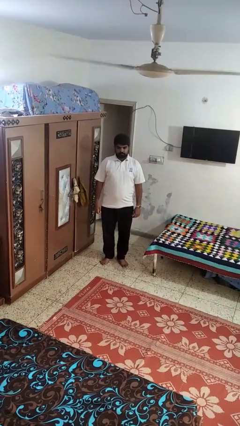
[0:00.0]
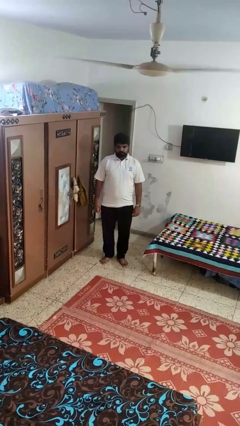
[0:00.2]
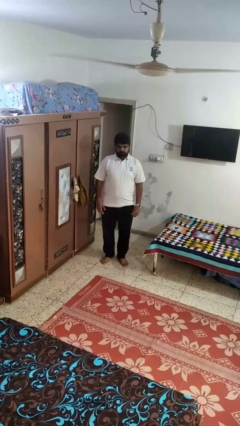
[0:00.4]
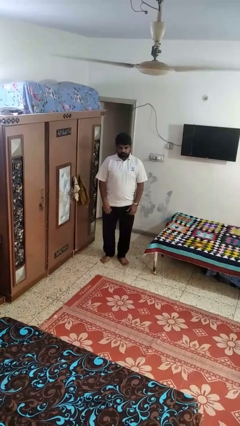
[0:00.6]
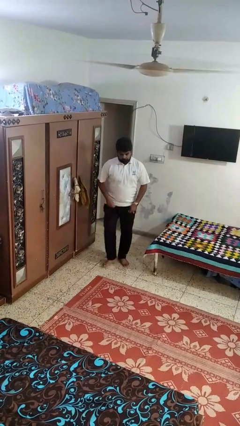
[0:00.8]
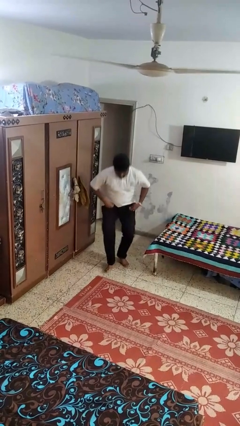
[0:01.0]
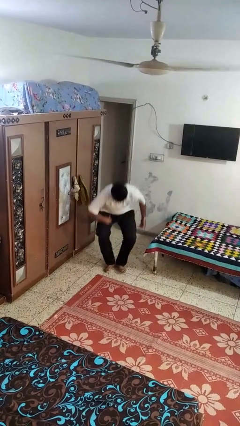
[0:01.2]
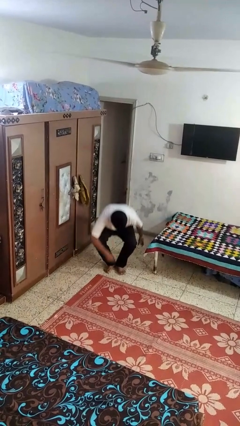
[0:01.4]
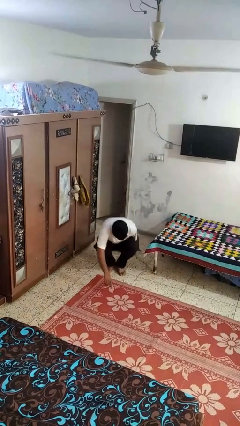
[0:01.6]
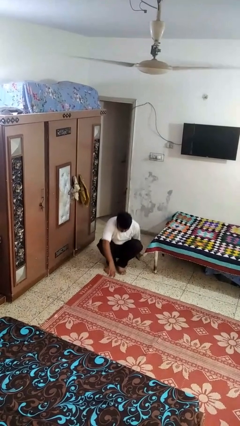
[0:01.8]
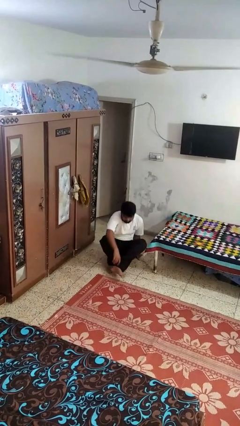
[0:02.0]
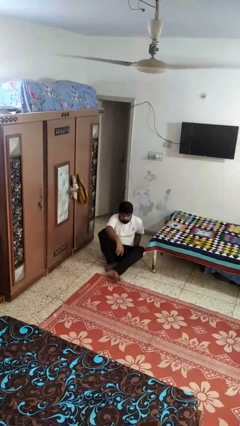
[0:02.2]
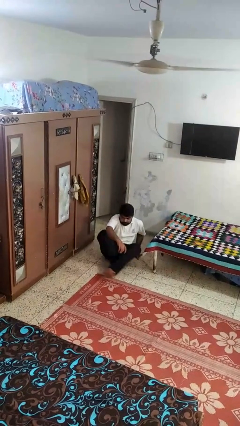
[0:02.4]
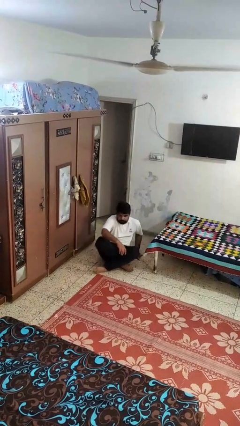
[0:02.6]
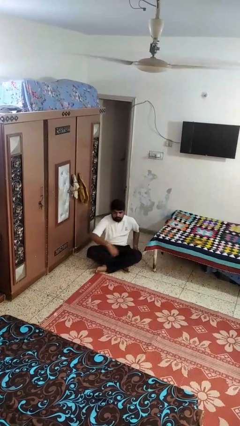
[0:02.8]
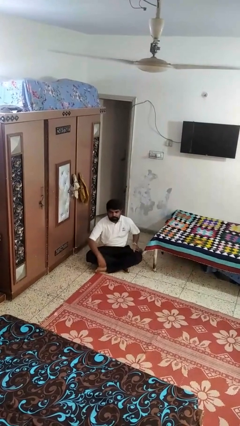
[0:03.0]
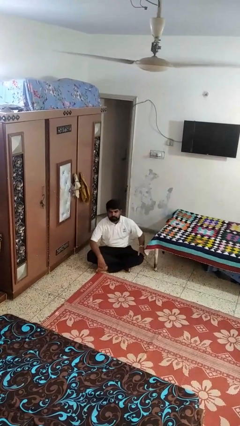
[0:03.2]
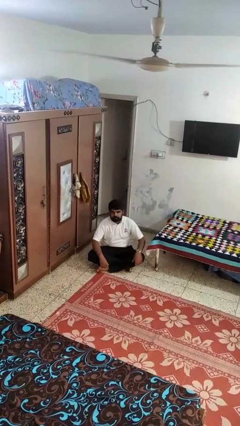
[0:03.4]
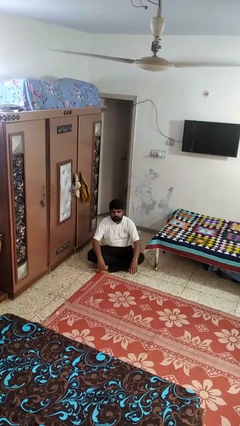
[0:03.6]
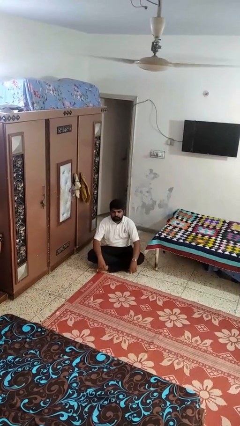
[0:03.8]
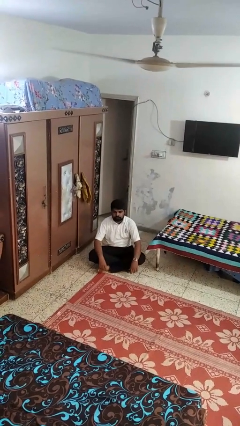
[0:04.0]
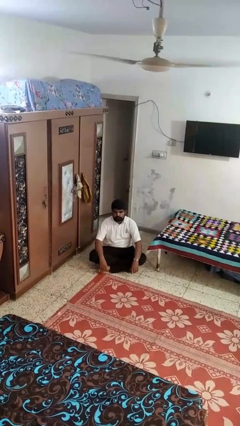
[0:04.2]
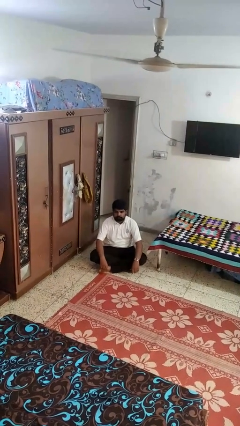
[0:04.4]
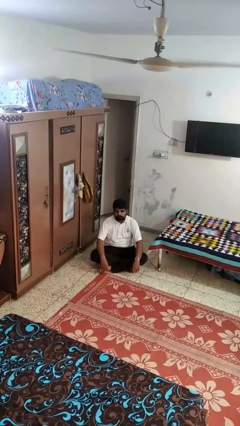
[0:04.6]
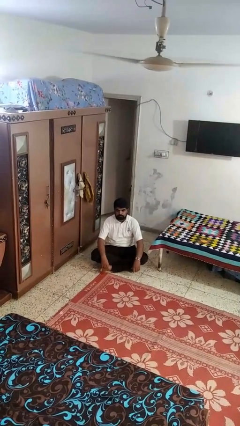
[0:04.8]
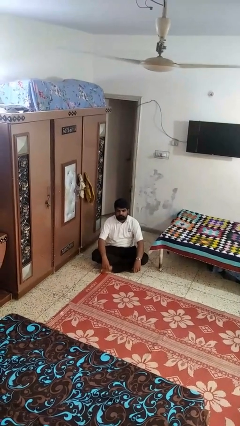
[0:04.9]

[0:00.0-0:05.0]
person sits crisscross

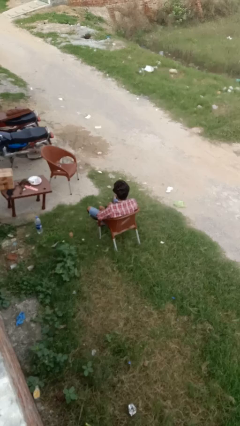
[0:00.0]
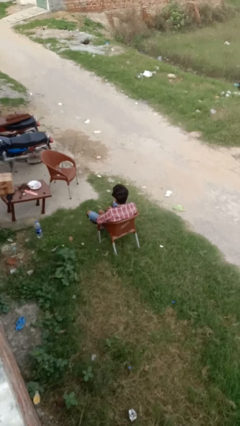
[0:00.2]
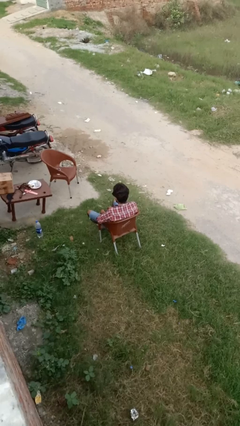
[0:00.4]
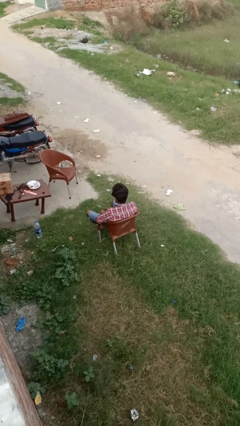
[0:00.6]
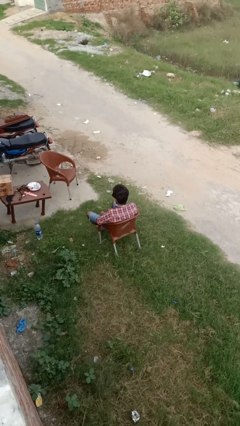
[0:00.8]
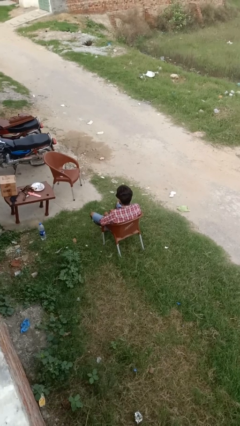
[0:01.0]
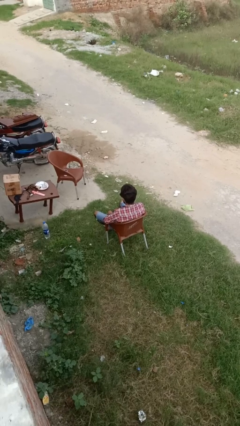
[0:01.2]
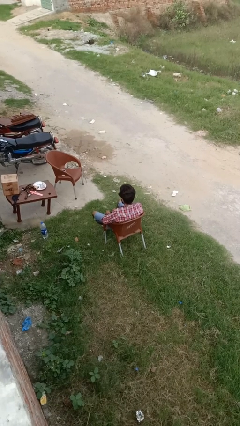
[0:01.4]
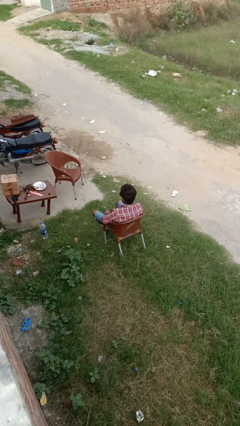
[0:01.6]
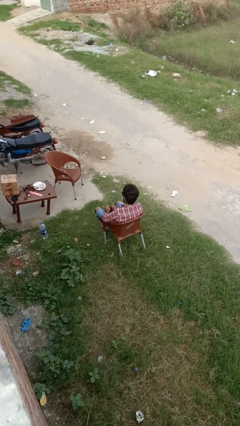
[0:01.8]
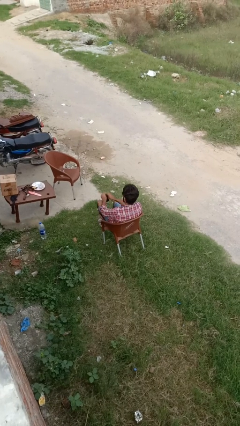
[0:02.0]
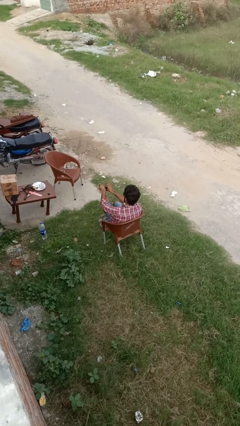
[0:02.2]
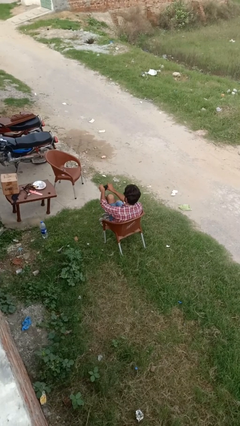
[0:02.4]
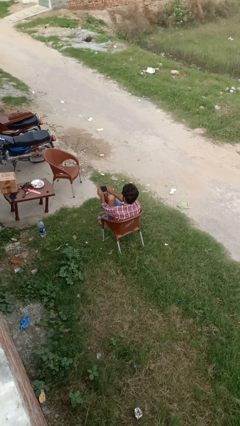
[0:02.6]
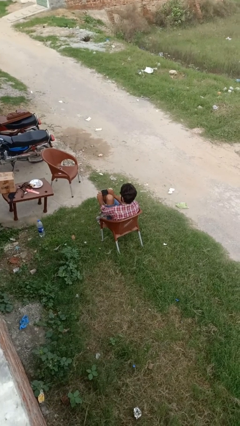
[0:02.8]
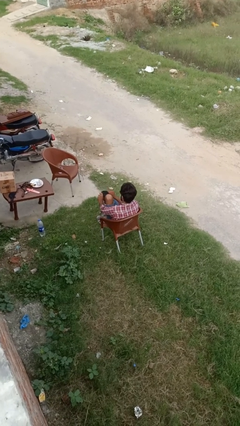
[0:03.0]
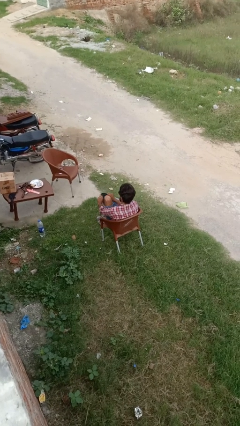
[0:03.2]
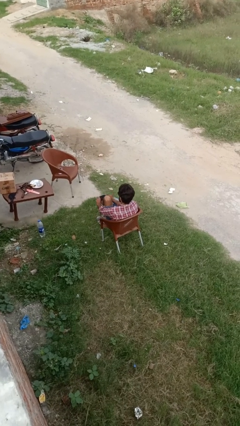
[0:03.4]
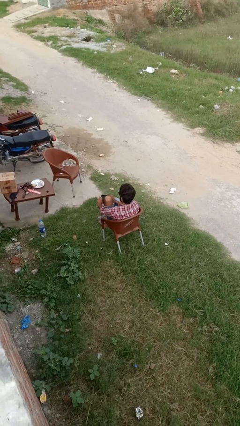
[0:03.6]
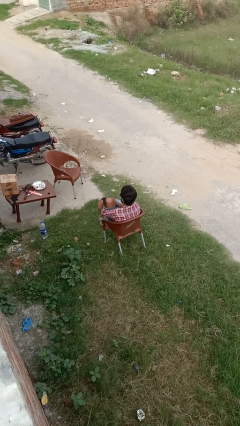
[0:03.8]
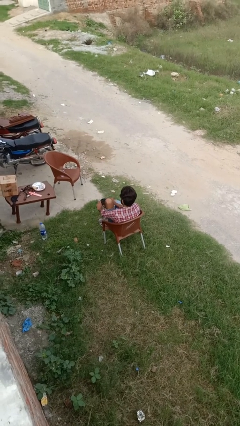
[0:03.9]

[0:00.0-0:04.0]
person puts on socks

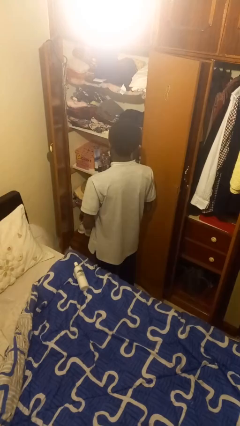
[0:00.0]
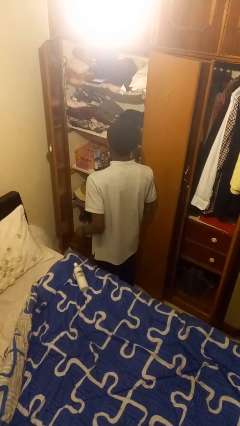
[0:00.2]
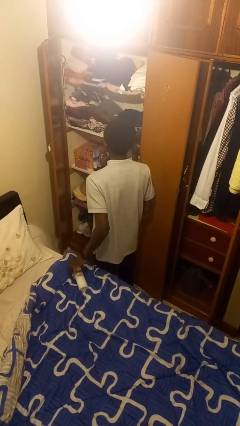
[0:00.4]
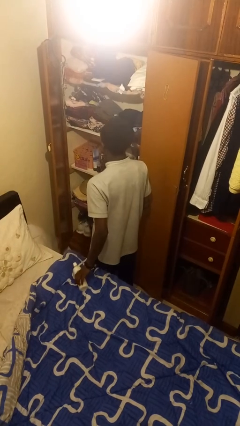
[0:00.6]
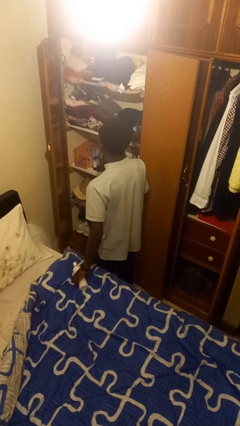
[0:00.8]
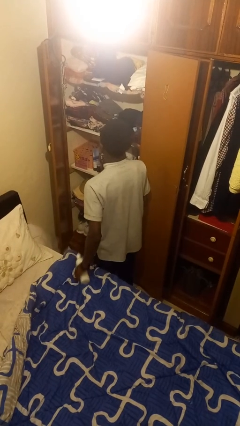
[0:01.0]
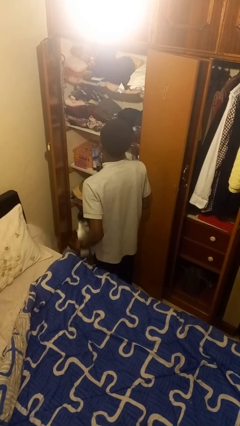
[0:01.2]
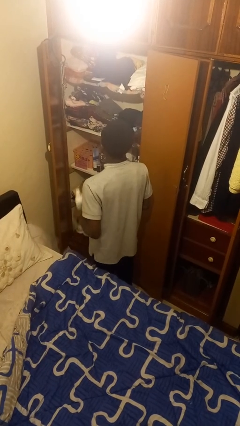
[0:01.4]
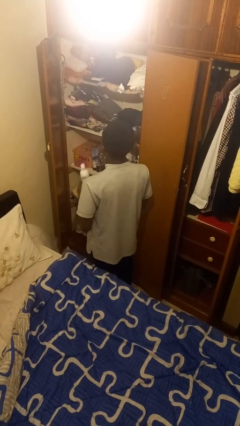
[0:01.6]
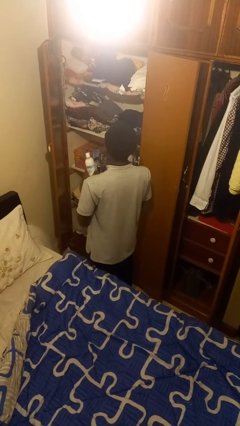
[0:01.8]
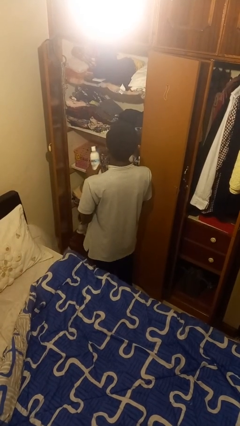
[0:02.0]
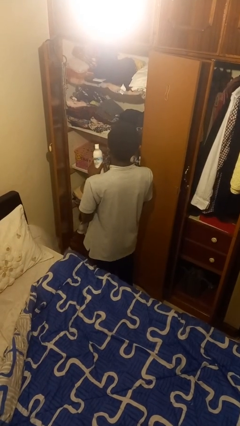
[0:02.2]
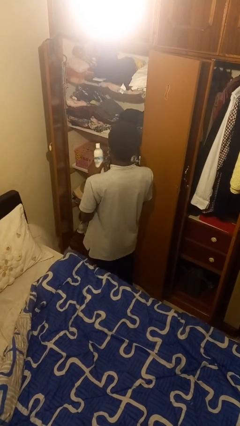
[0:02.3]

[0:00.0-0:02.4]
person picks up object from bed

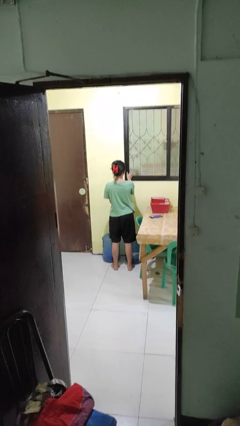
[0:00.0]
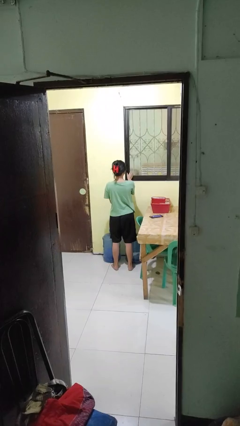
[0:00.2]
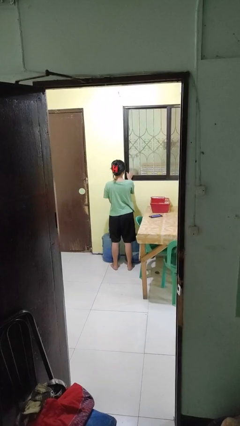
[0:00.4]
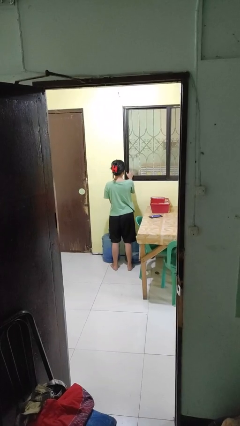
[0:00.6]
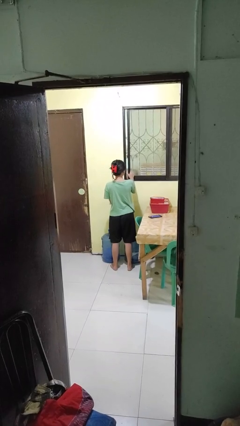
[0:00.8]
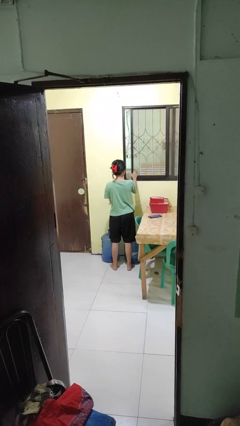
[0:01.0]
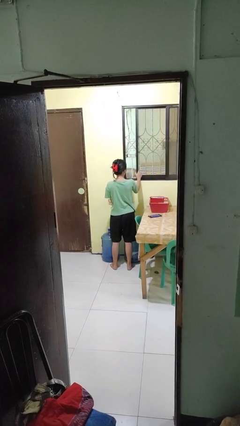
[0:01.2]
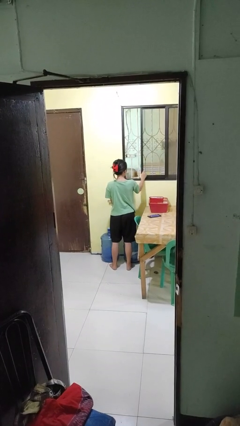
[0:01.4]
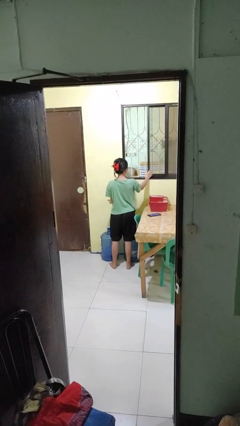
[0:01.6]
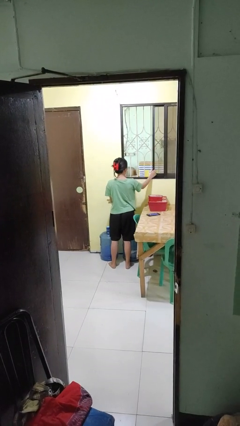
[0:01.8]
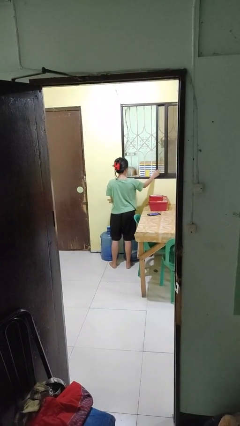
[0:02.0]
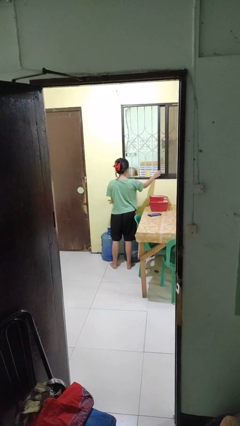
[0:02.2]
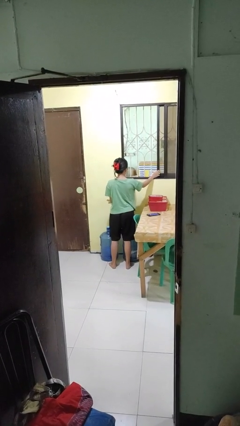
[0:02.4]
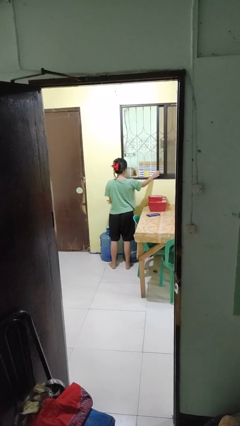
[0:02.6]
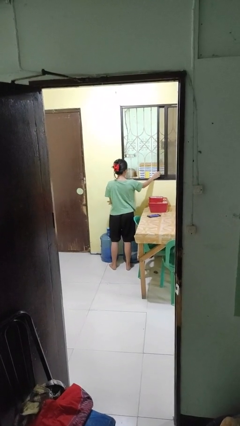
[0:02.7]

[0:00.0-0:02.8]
person opens home window

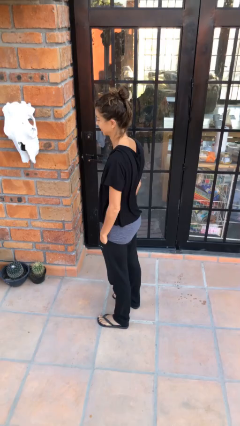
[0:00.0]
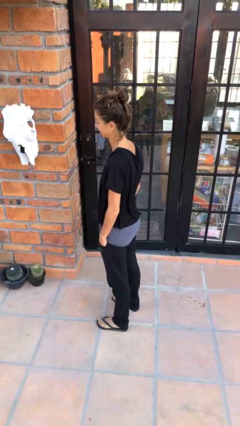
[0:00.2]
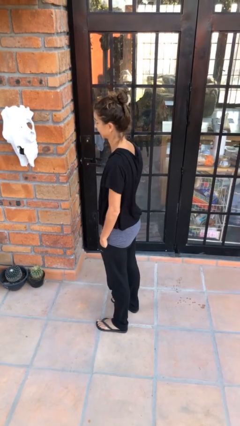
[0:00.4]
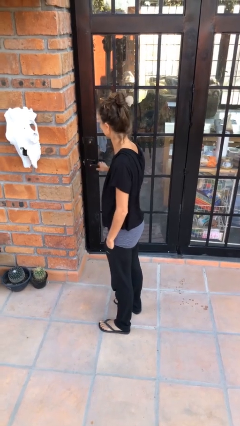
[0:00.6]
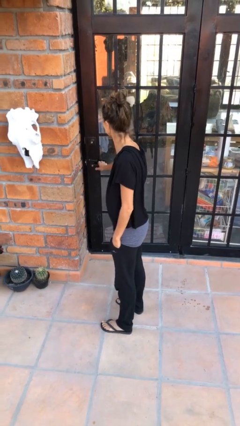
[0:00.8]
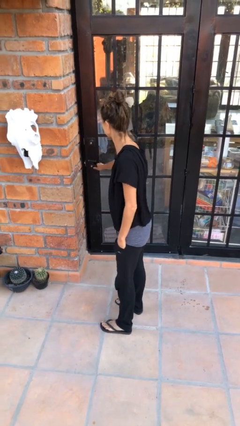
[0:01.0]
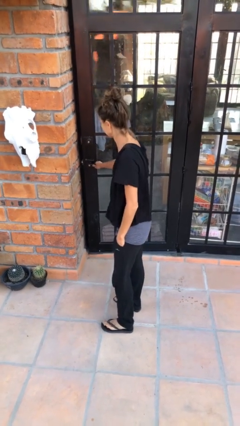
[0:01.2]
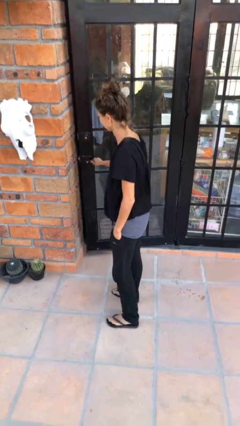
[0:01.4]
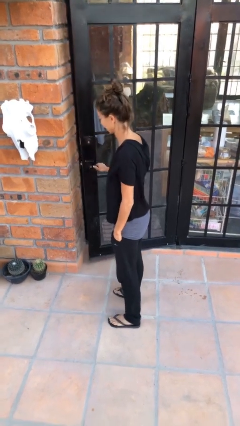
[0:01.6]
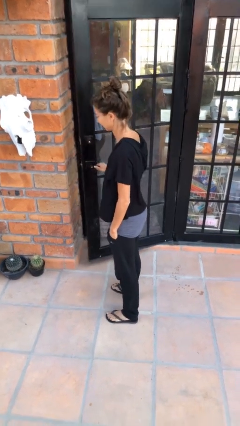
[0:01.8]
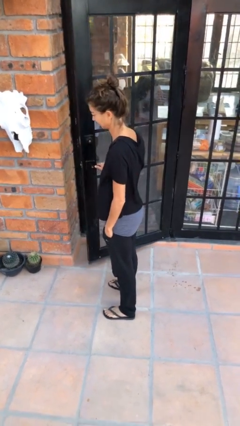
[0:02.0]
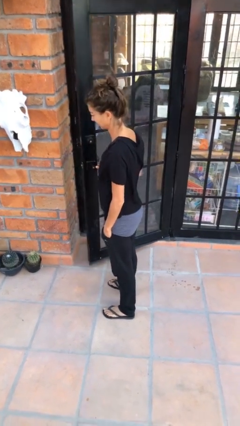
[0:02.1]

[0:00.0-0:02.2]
person opens facility door

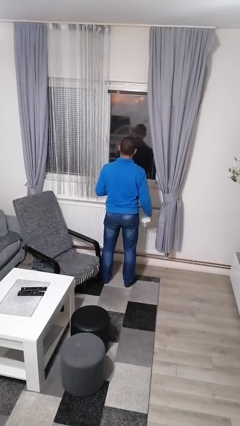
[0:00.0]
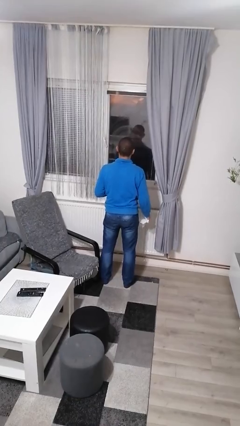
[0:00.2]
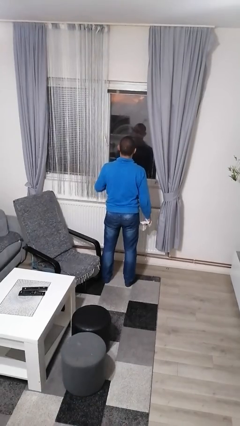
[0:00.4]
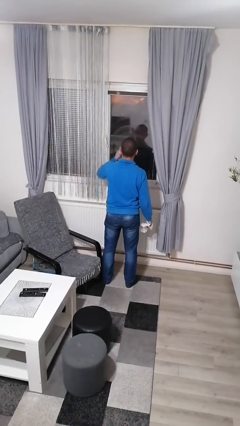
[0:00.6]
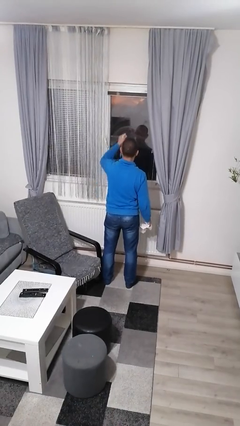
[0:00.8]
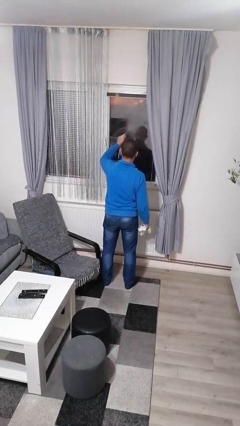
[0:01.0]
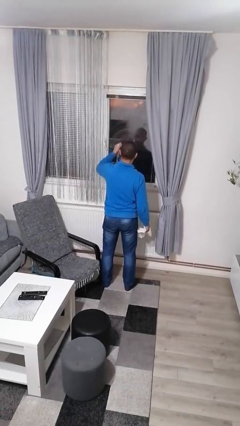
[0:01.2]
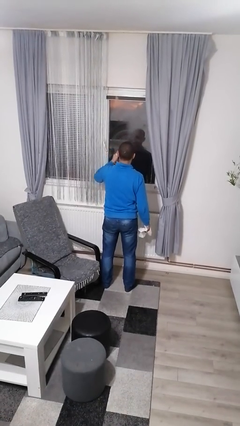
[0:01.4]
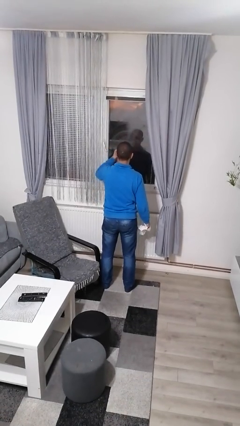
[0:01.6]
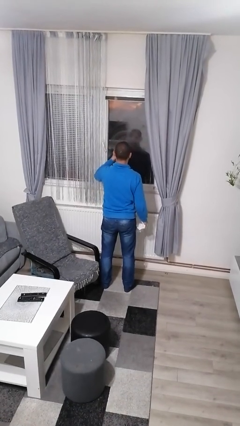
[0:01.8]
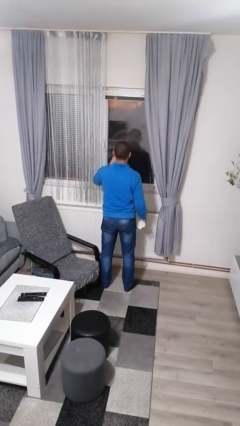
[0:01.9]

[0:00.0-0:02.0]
person sprays from bottle
